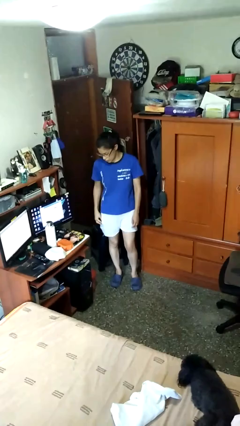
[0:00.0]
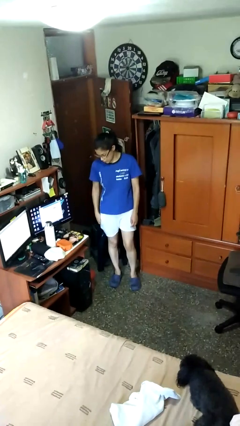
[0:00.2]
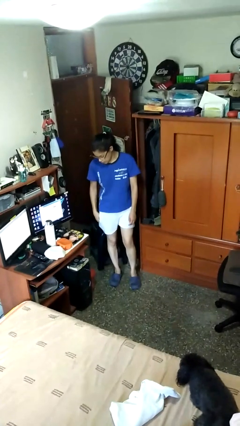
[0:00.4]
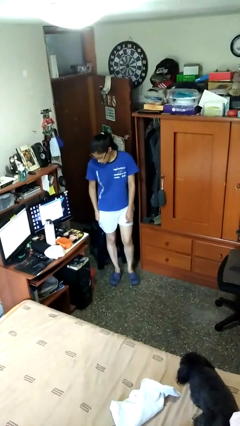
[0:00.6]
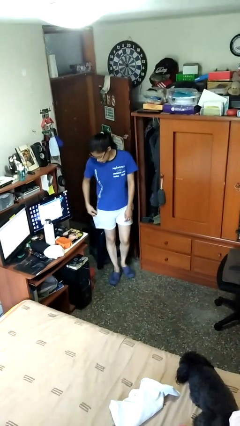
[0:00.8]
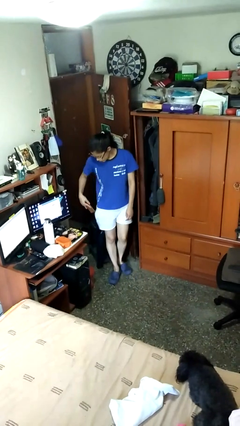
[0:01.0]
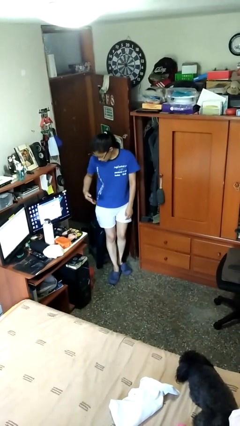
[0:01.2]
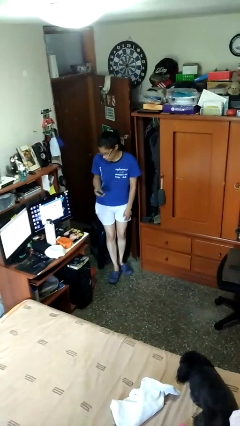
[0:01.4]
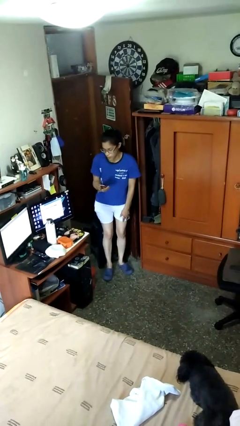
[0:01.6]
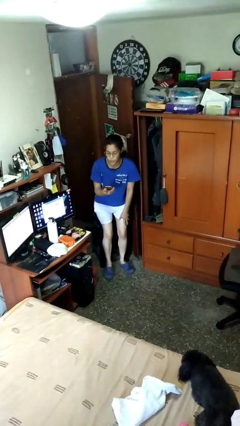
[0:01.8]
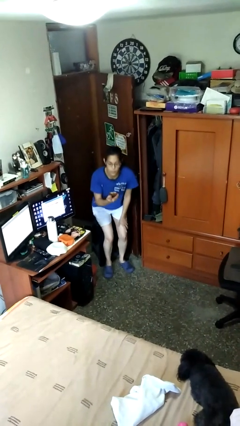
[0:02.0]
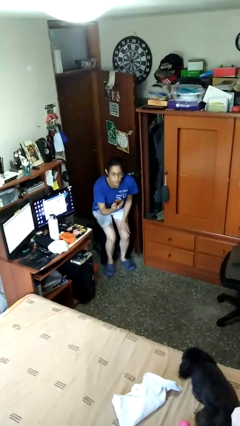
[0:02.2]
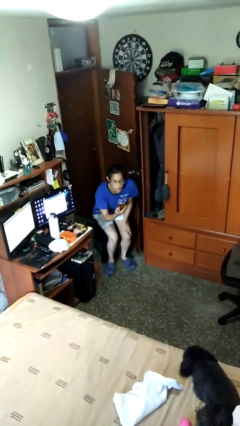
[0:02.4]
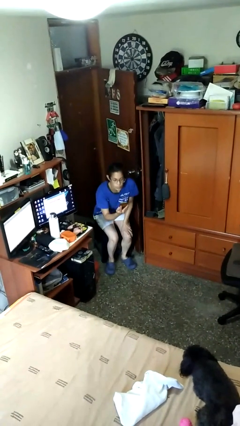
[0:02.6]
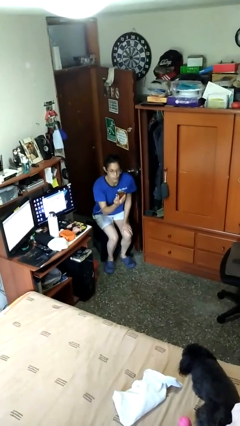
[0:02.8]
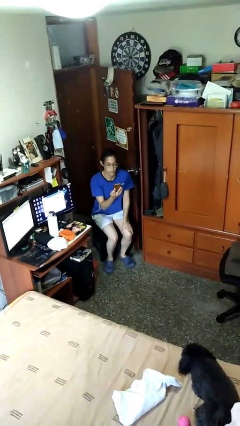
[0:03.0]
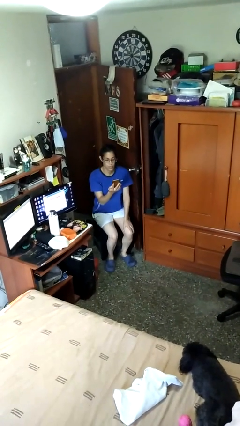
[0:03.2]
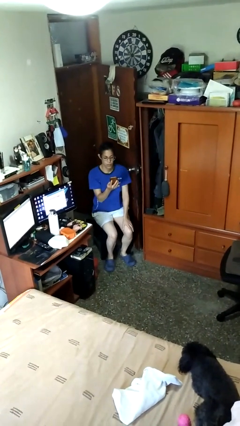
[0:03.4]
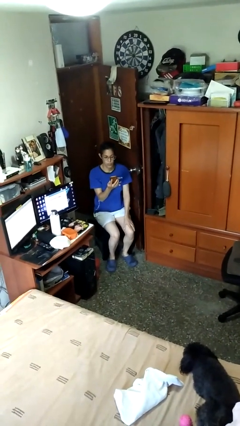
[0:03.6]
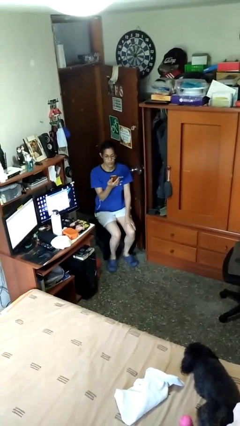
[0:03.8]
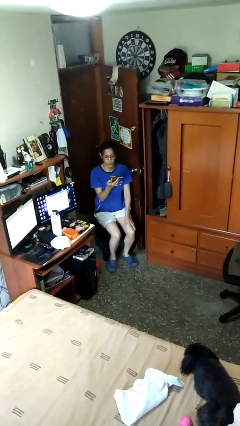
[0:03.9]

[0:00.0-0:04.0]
person takes phone from pocket

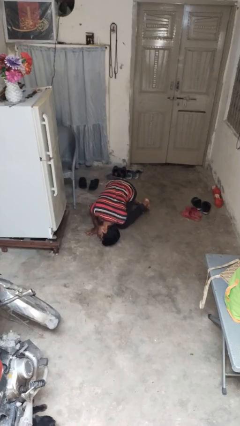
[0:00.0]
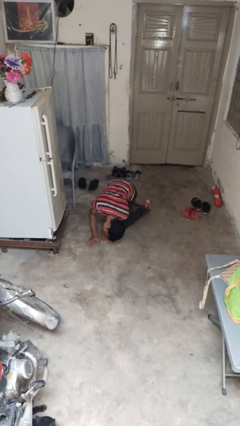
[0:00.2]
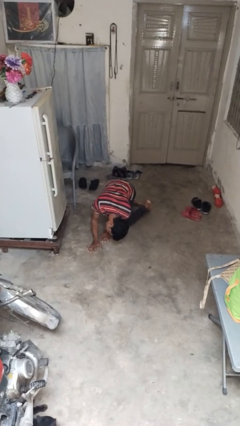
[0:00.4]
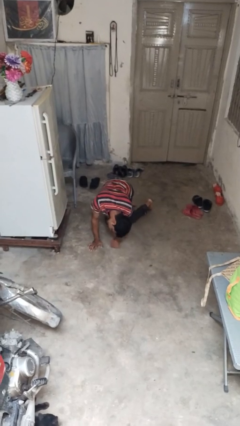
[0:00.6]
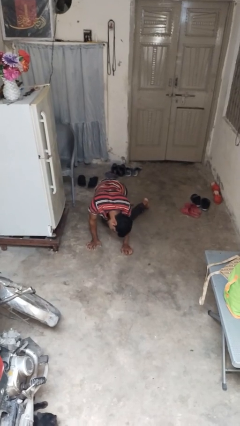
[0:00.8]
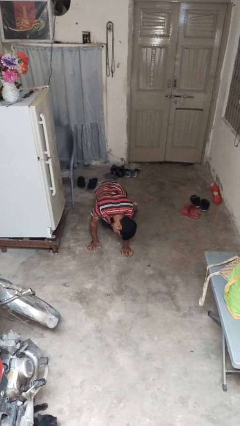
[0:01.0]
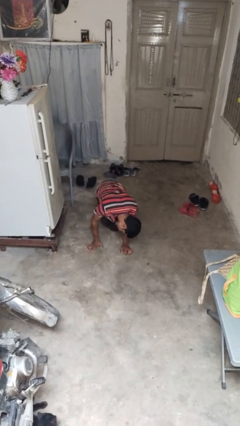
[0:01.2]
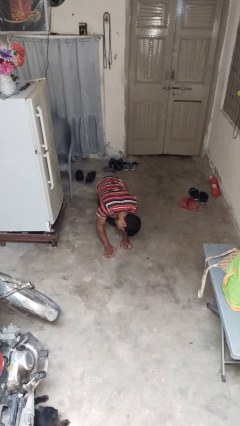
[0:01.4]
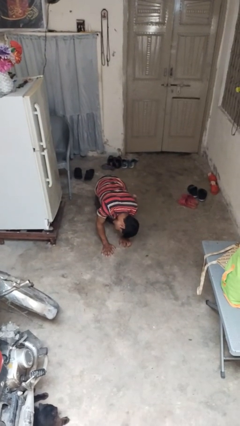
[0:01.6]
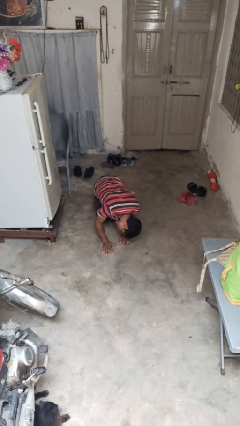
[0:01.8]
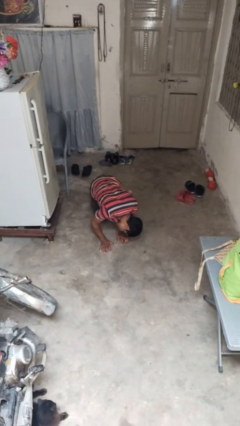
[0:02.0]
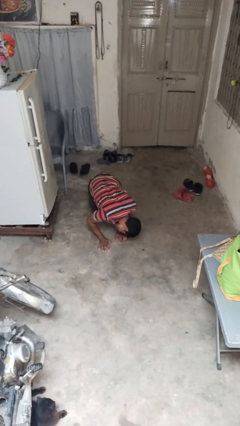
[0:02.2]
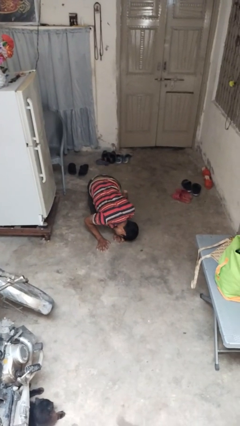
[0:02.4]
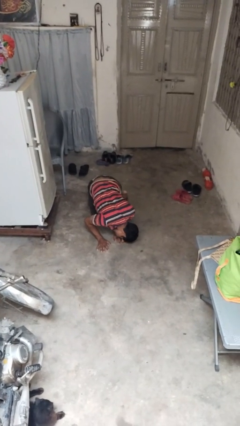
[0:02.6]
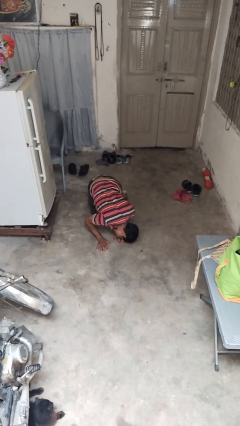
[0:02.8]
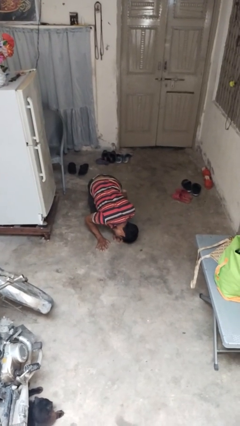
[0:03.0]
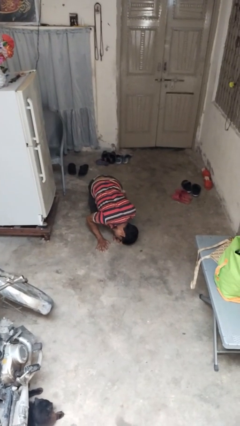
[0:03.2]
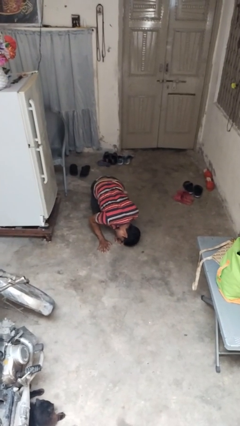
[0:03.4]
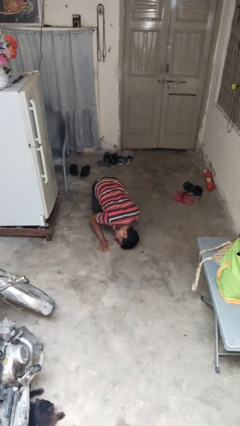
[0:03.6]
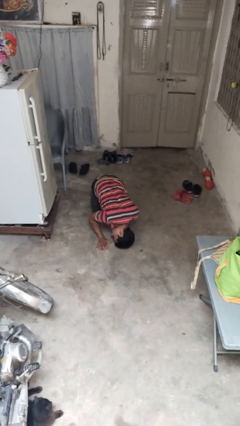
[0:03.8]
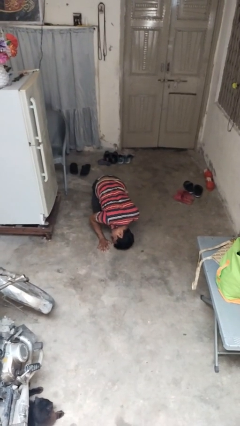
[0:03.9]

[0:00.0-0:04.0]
person crawls

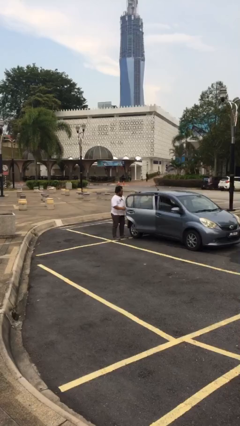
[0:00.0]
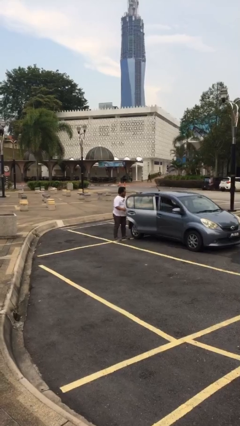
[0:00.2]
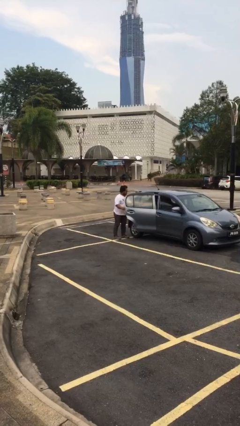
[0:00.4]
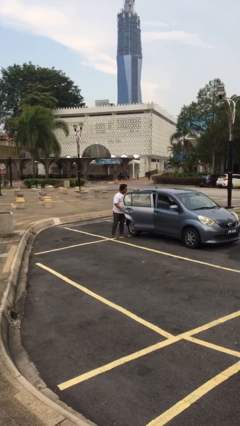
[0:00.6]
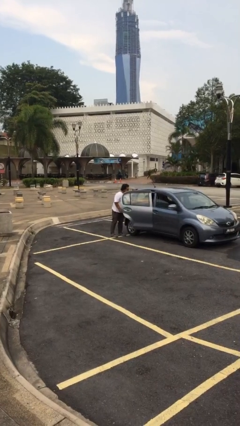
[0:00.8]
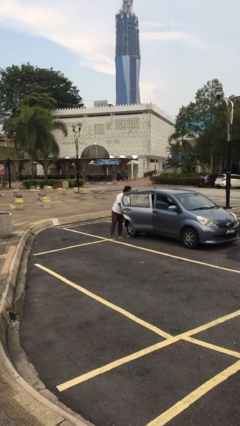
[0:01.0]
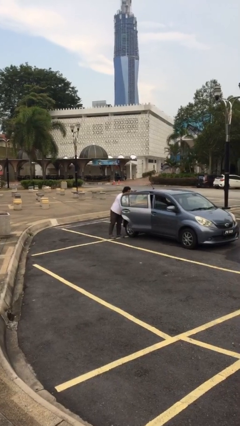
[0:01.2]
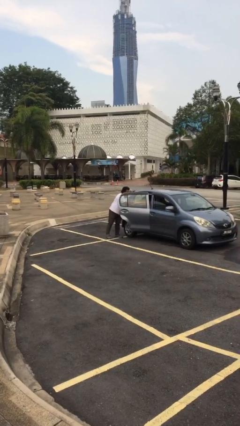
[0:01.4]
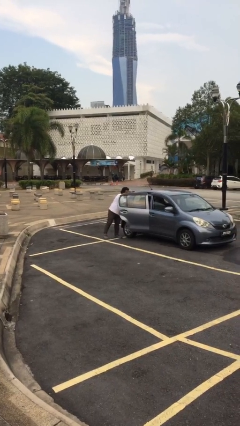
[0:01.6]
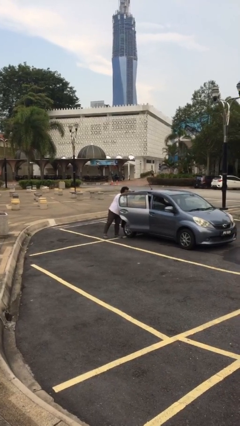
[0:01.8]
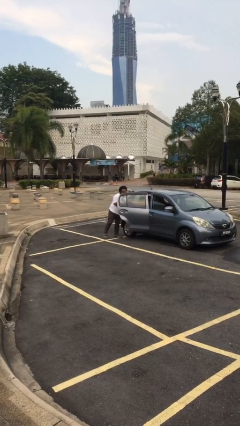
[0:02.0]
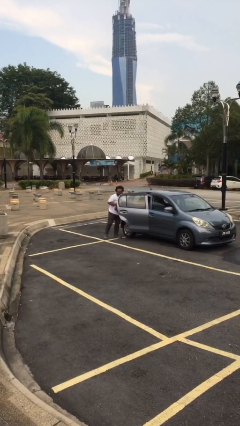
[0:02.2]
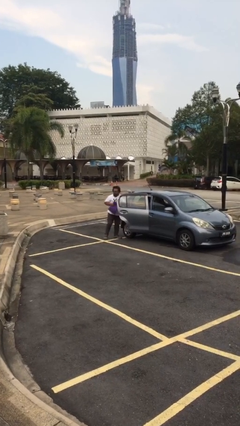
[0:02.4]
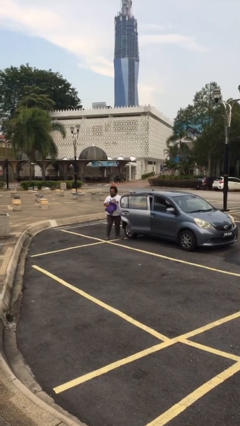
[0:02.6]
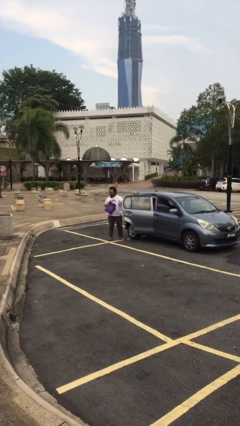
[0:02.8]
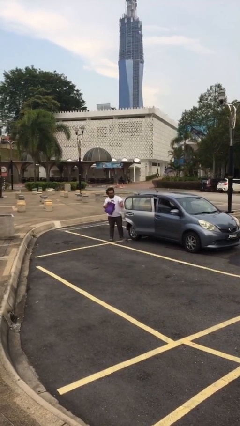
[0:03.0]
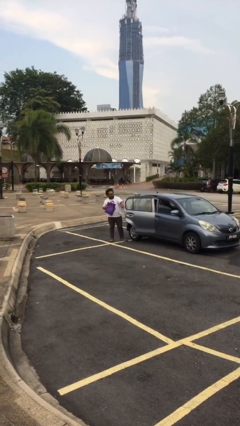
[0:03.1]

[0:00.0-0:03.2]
person unloads car

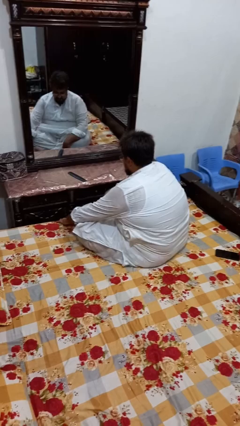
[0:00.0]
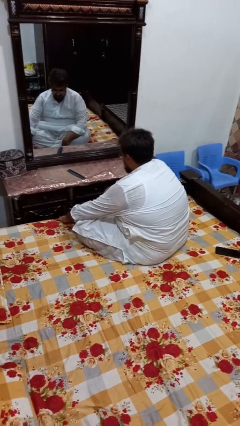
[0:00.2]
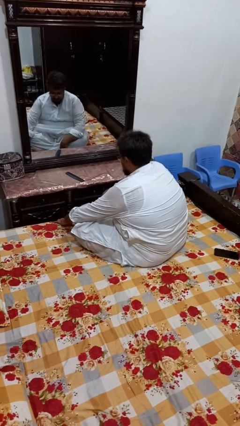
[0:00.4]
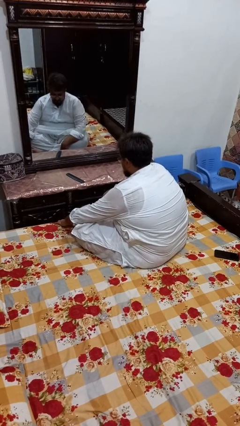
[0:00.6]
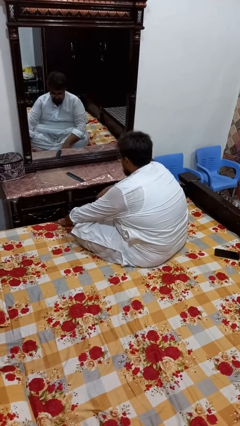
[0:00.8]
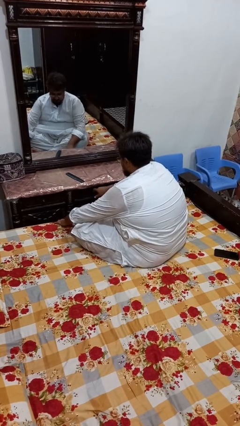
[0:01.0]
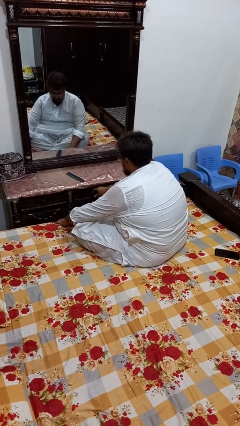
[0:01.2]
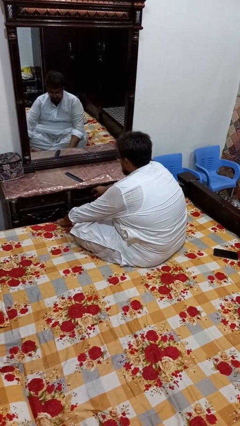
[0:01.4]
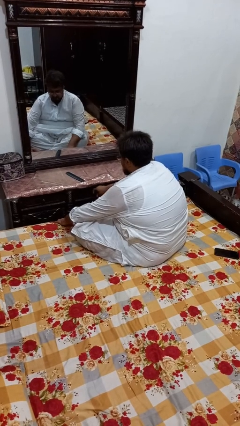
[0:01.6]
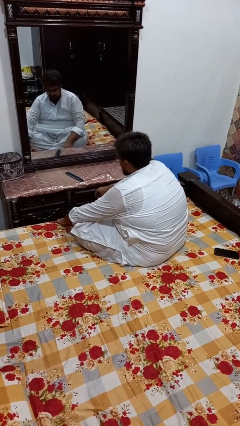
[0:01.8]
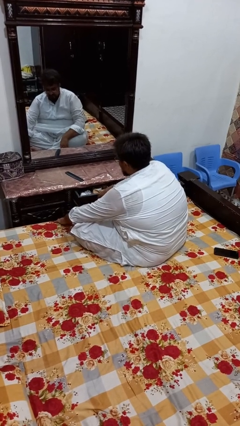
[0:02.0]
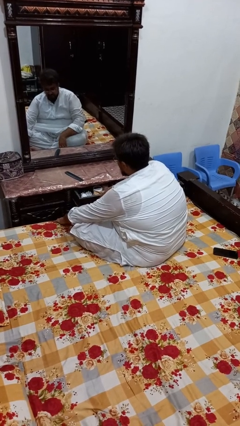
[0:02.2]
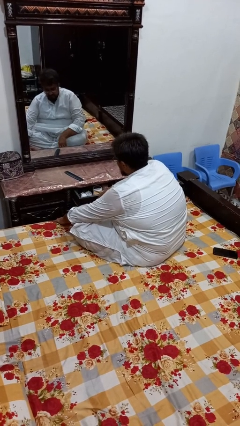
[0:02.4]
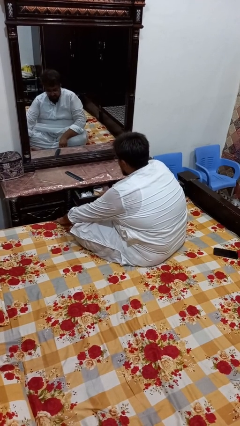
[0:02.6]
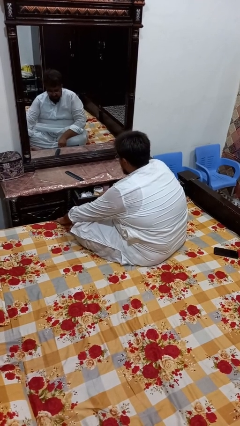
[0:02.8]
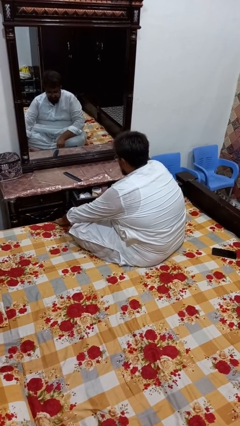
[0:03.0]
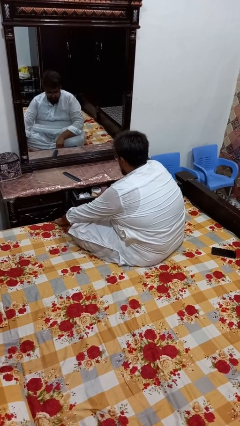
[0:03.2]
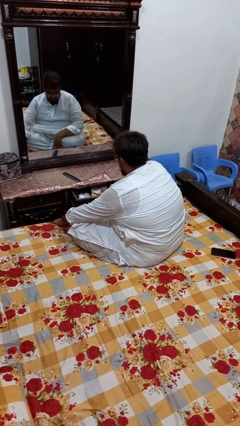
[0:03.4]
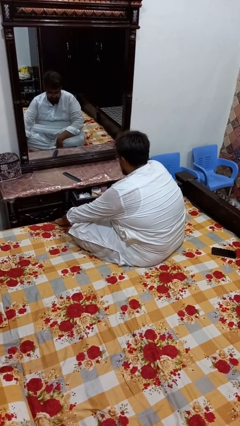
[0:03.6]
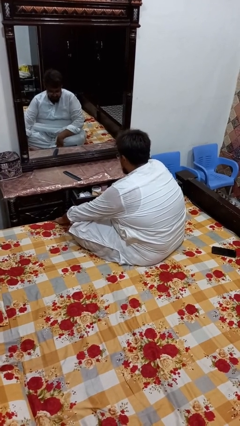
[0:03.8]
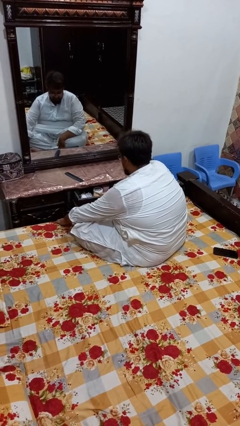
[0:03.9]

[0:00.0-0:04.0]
person opens dresser drawer

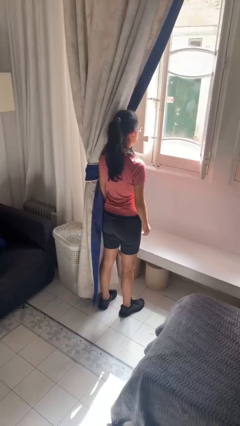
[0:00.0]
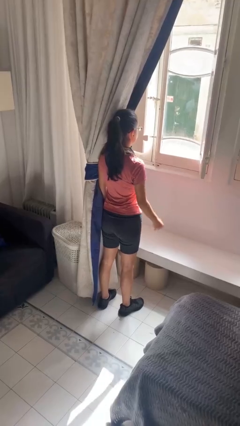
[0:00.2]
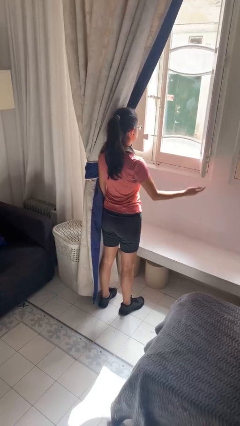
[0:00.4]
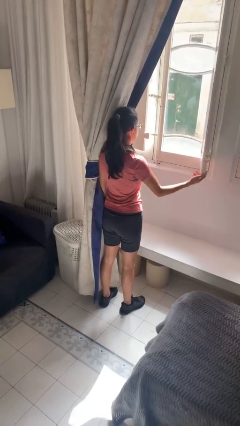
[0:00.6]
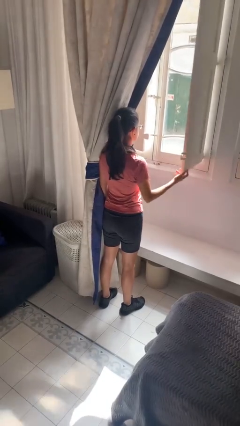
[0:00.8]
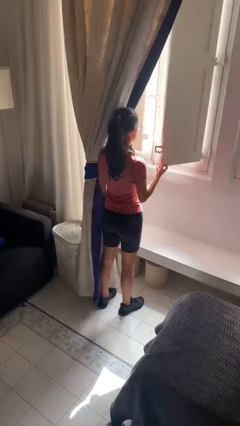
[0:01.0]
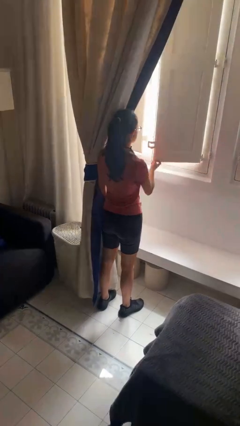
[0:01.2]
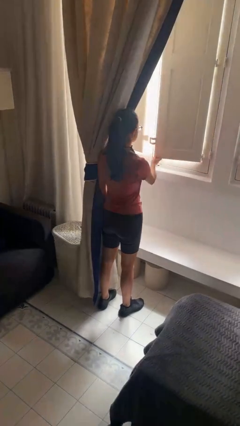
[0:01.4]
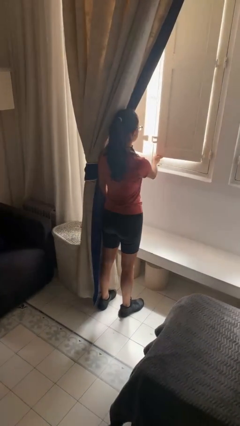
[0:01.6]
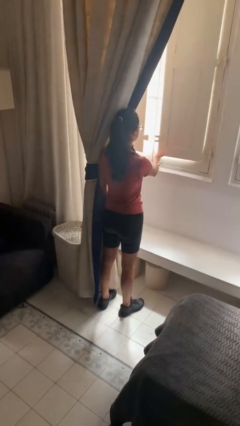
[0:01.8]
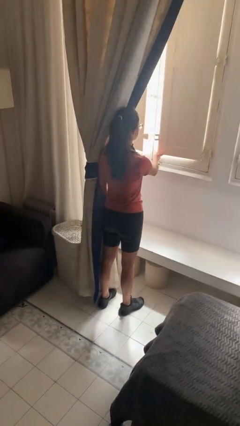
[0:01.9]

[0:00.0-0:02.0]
person closes home window

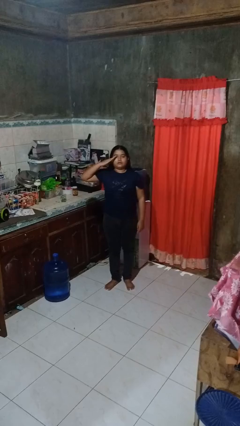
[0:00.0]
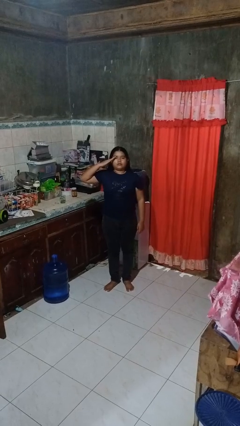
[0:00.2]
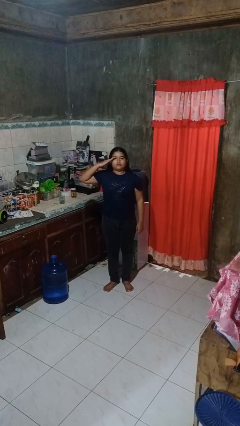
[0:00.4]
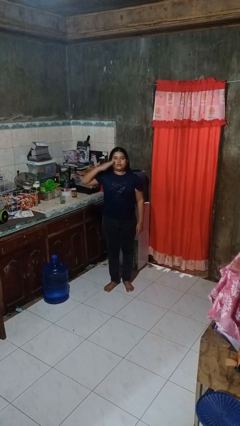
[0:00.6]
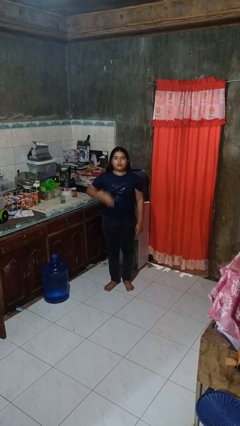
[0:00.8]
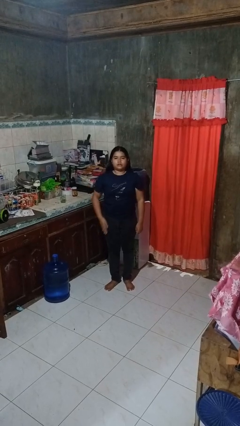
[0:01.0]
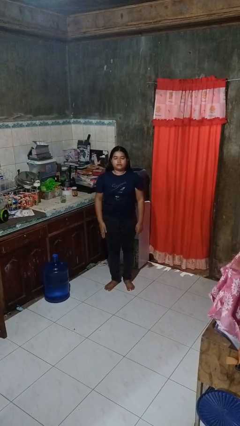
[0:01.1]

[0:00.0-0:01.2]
person salutes
